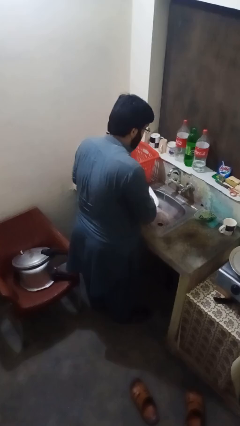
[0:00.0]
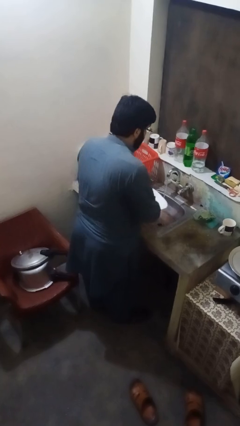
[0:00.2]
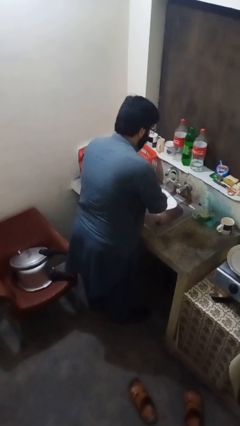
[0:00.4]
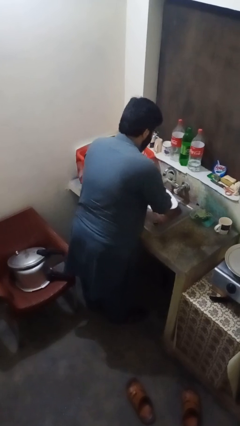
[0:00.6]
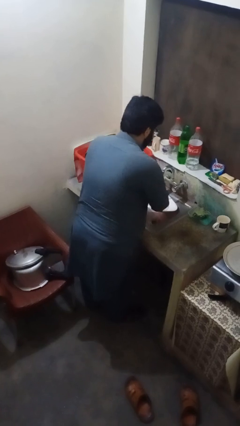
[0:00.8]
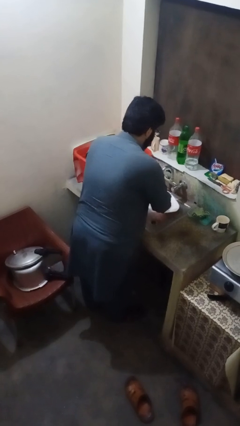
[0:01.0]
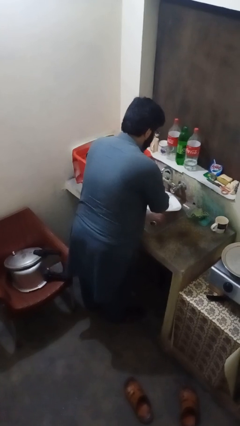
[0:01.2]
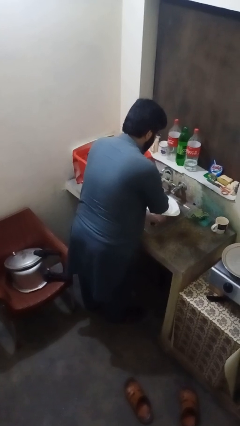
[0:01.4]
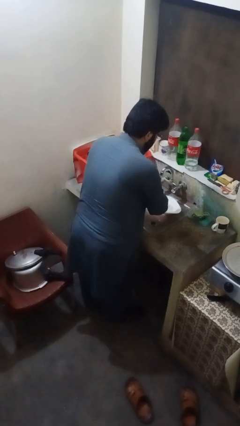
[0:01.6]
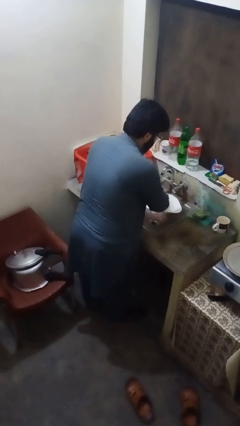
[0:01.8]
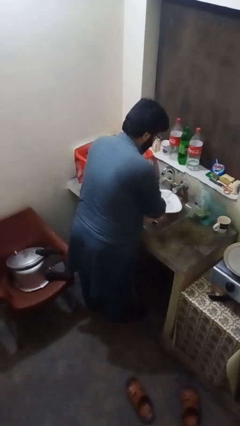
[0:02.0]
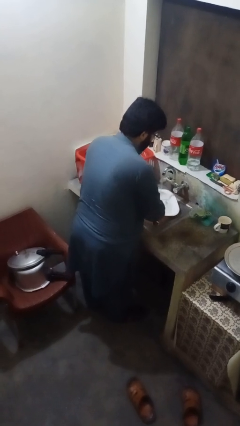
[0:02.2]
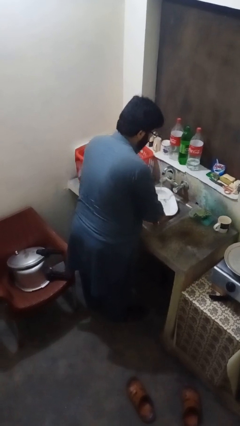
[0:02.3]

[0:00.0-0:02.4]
person washes dish

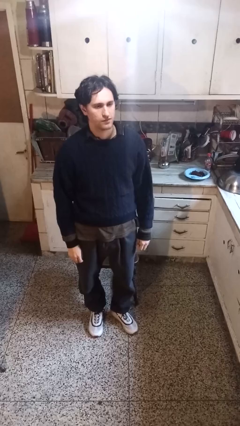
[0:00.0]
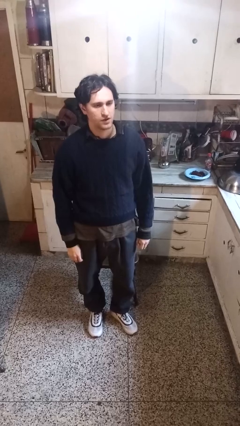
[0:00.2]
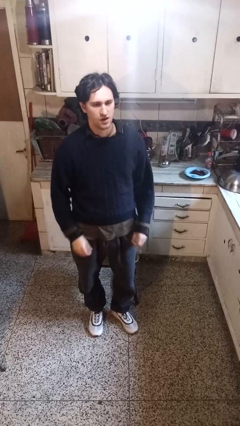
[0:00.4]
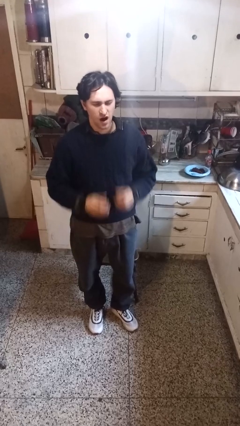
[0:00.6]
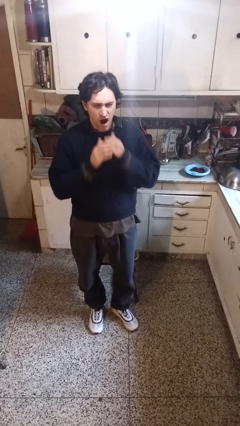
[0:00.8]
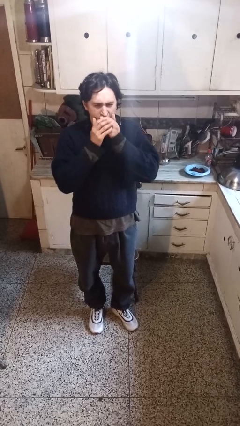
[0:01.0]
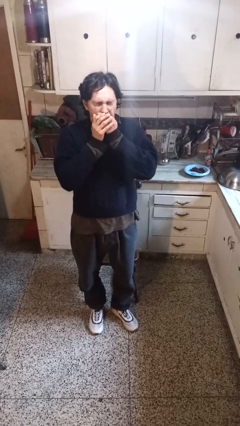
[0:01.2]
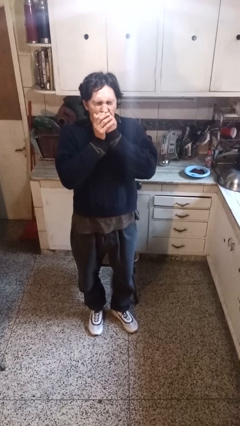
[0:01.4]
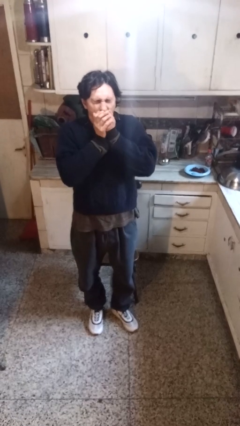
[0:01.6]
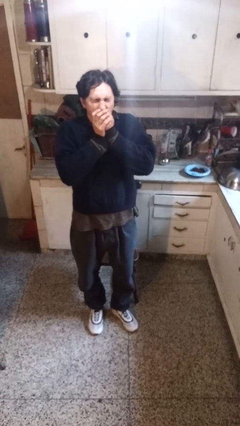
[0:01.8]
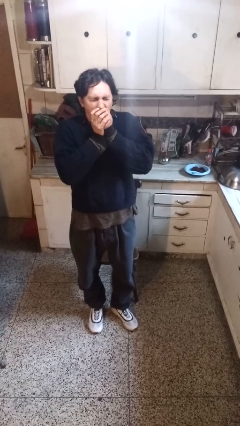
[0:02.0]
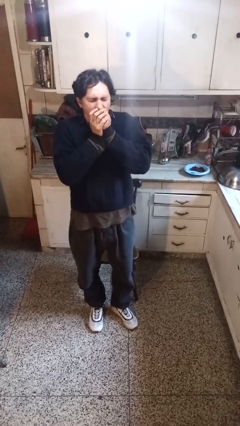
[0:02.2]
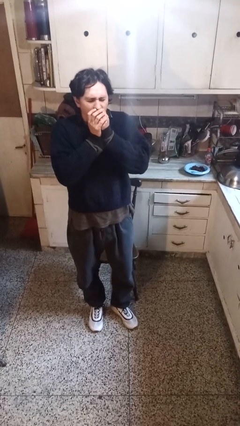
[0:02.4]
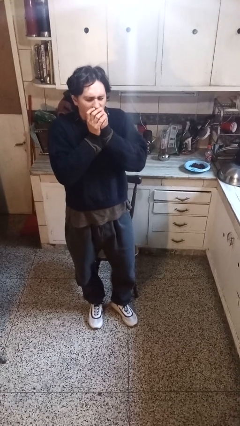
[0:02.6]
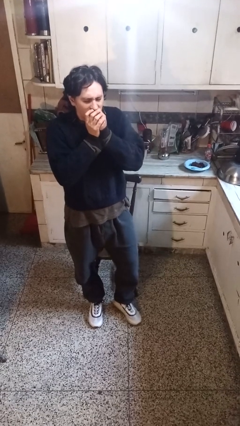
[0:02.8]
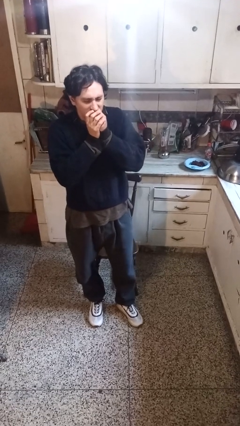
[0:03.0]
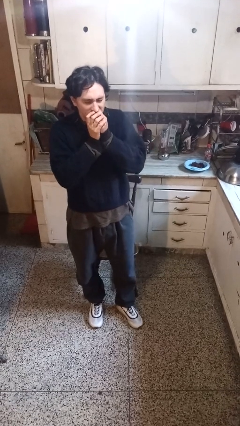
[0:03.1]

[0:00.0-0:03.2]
person yawns

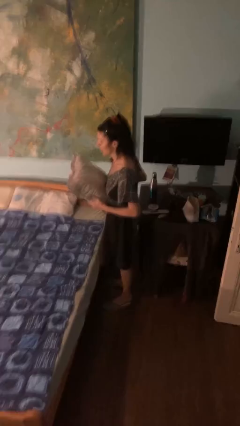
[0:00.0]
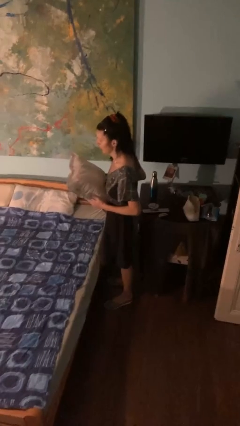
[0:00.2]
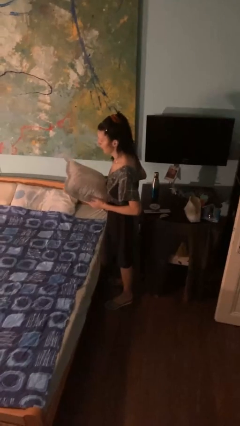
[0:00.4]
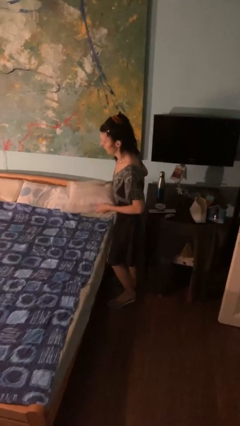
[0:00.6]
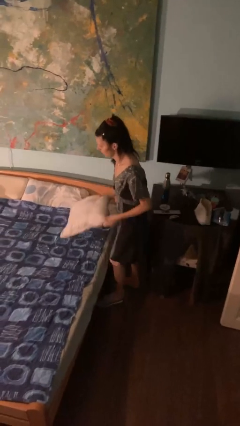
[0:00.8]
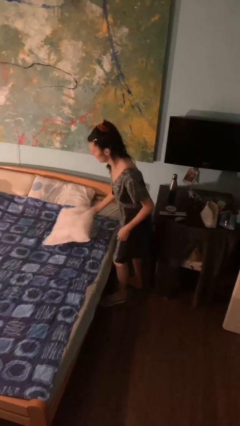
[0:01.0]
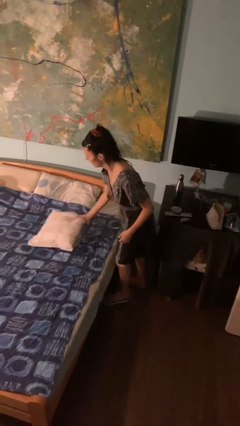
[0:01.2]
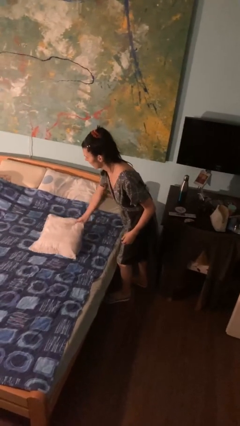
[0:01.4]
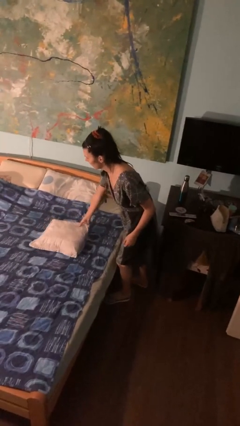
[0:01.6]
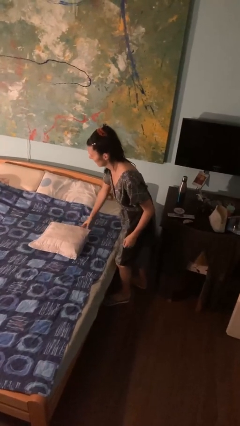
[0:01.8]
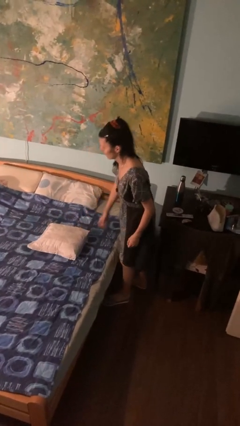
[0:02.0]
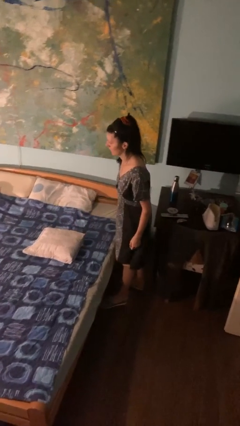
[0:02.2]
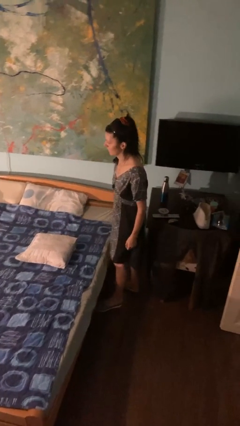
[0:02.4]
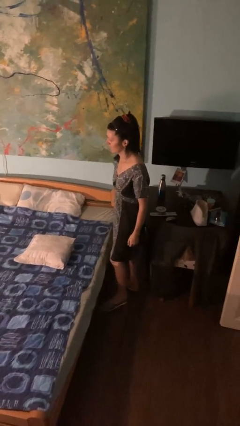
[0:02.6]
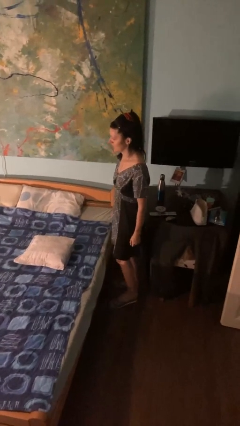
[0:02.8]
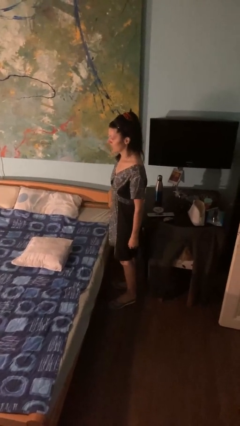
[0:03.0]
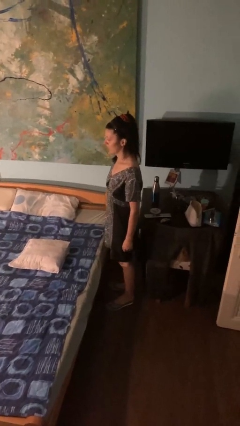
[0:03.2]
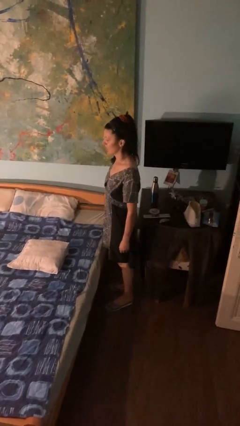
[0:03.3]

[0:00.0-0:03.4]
person puts down object on bed

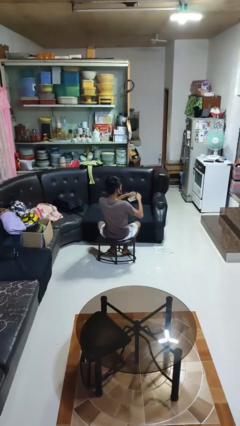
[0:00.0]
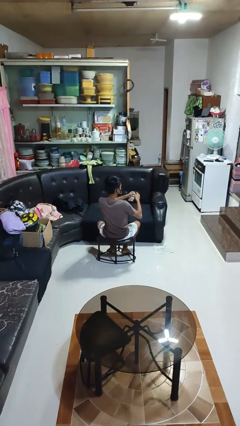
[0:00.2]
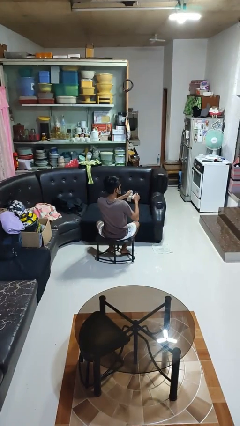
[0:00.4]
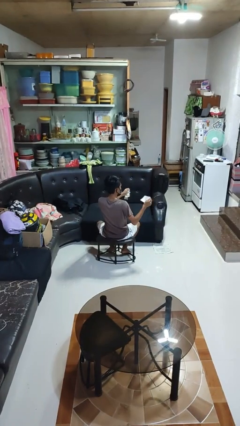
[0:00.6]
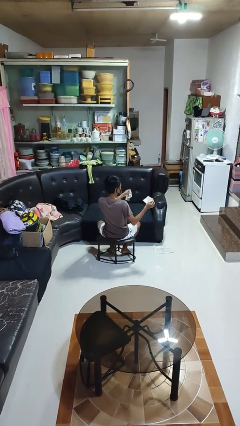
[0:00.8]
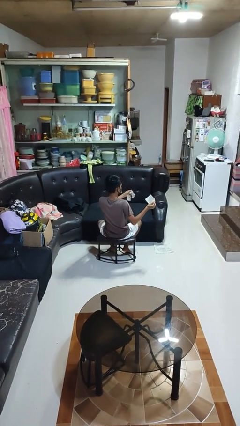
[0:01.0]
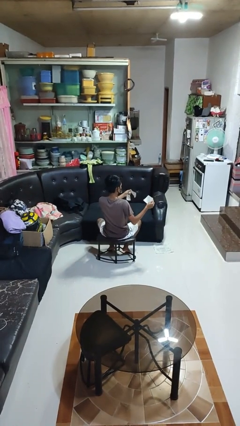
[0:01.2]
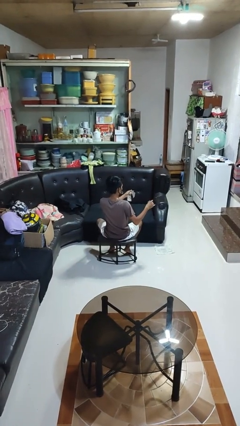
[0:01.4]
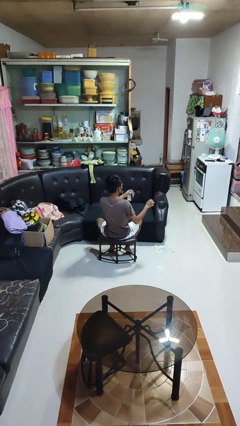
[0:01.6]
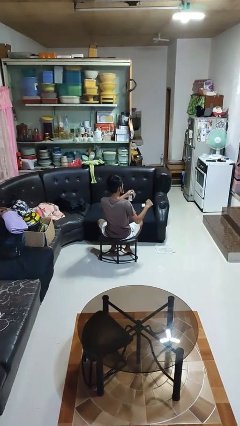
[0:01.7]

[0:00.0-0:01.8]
person tears paper

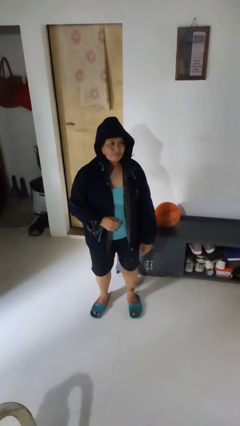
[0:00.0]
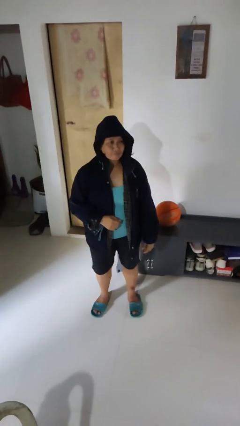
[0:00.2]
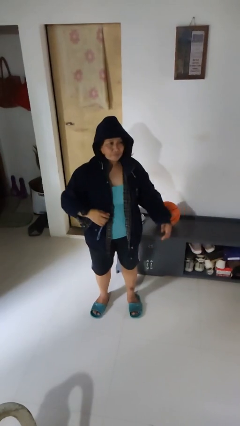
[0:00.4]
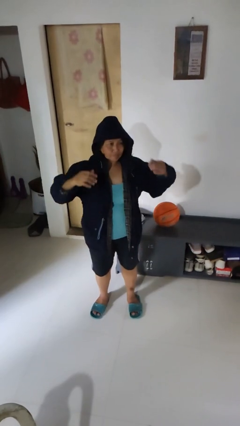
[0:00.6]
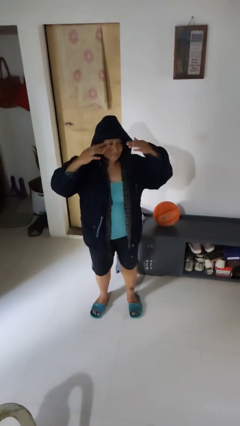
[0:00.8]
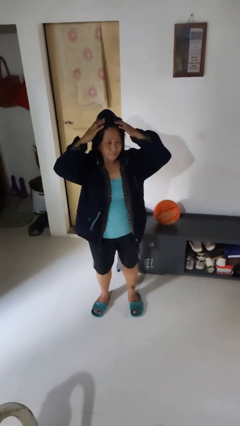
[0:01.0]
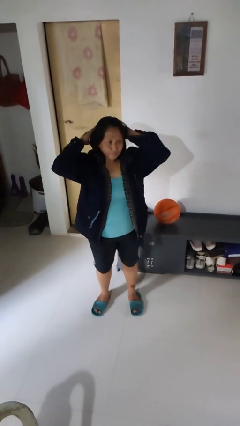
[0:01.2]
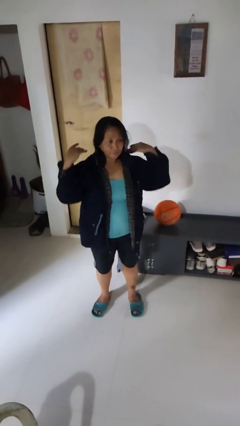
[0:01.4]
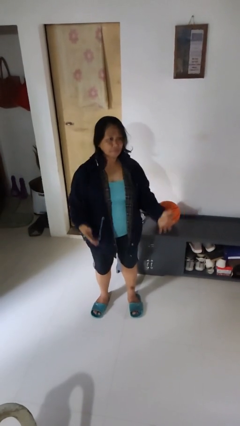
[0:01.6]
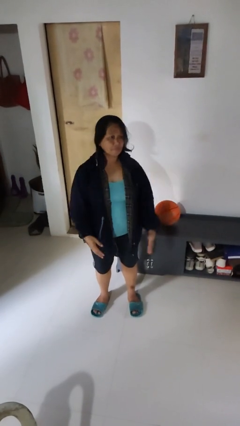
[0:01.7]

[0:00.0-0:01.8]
person takes off hoodie

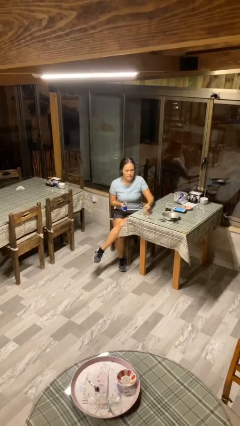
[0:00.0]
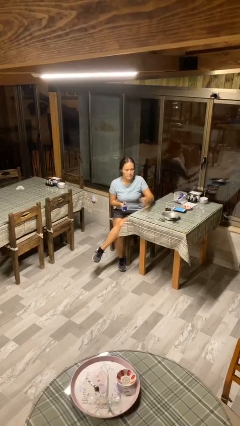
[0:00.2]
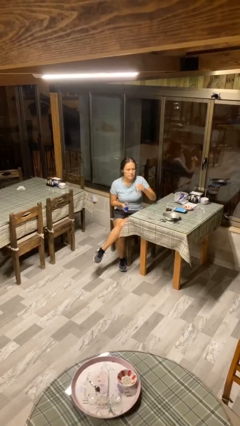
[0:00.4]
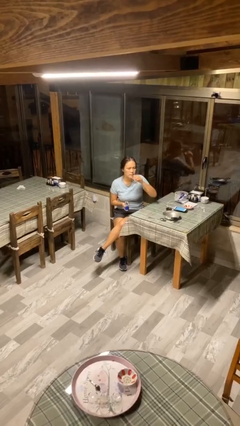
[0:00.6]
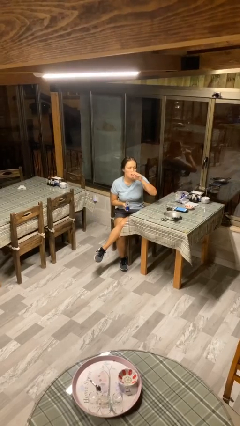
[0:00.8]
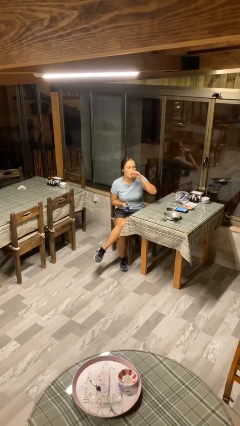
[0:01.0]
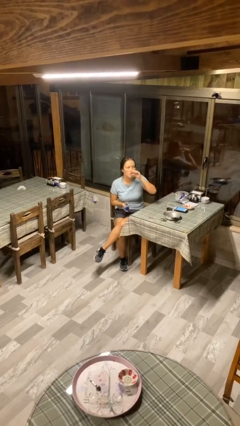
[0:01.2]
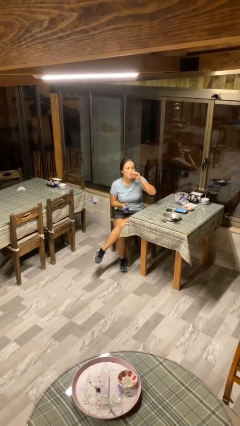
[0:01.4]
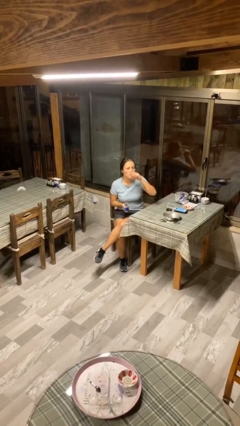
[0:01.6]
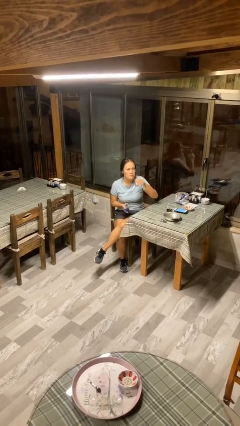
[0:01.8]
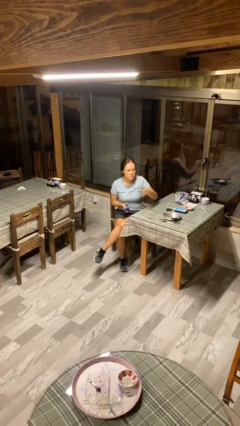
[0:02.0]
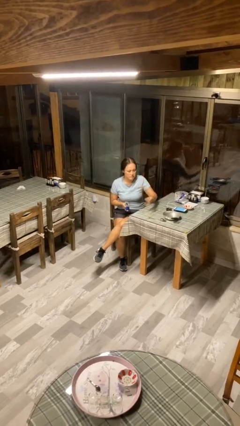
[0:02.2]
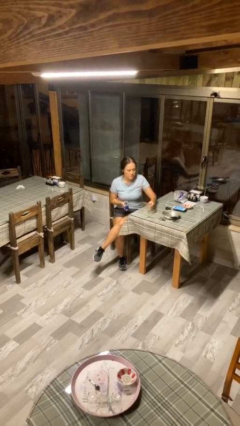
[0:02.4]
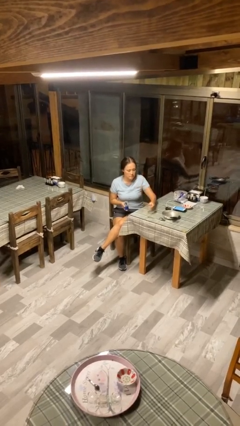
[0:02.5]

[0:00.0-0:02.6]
person drinks from cup

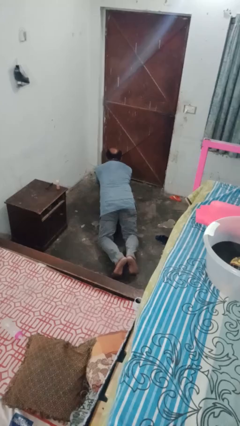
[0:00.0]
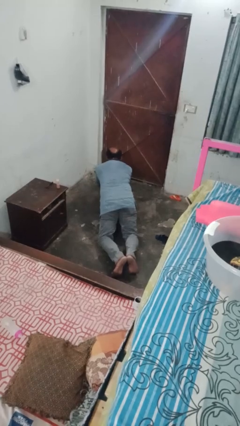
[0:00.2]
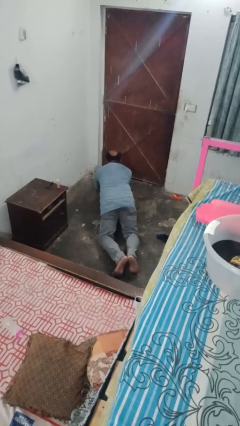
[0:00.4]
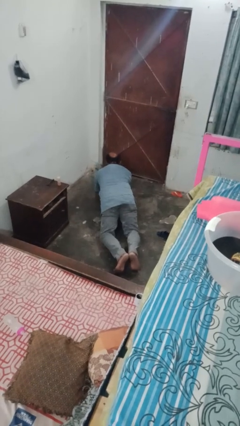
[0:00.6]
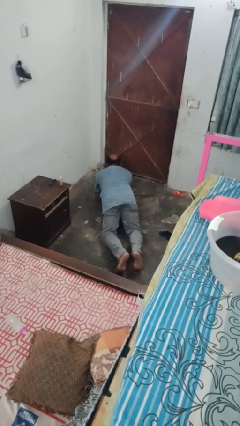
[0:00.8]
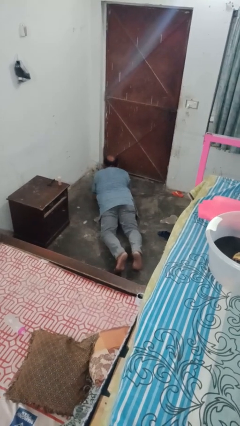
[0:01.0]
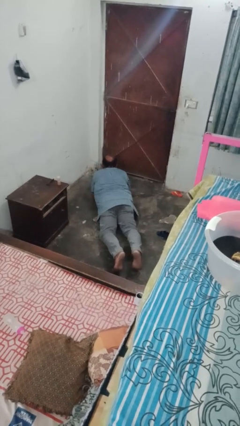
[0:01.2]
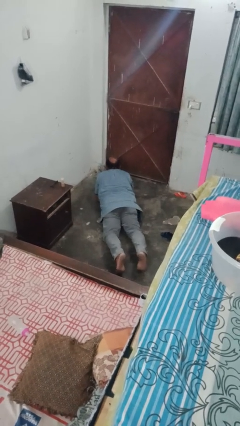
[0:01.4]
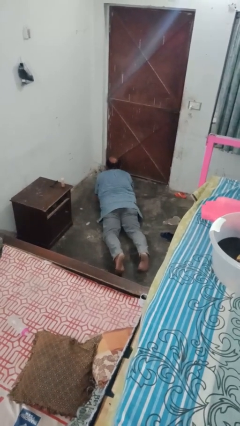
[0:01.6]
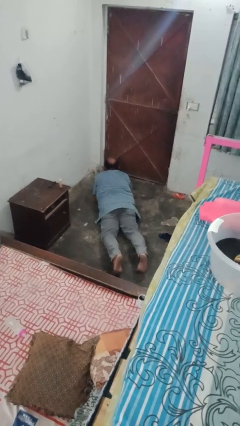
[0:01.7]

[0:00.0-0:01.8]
person stands up from floor

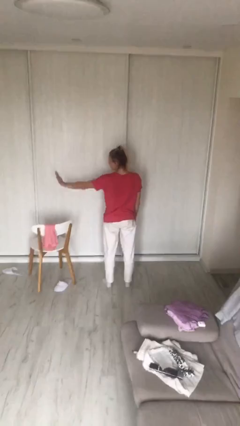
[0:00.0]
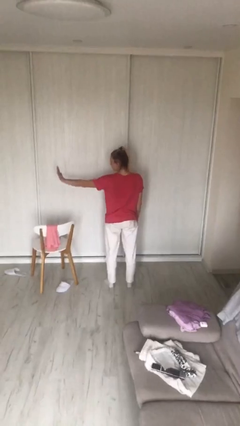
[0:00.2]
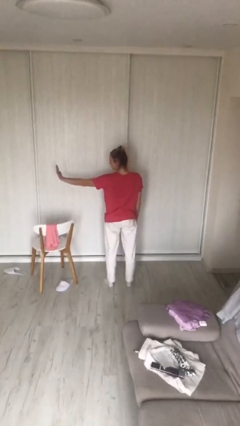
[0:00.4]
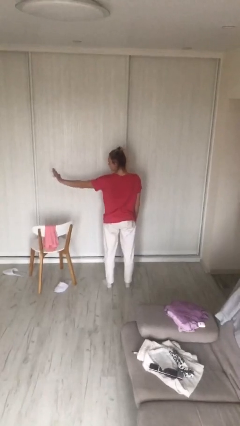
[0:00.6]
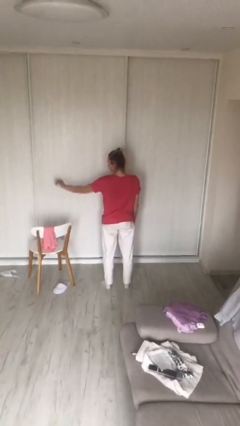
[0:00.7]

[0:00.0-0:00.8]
person gestures stop
